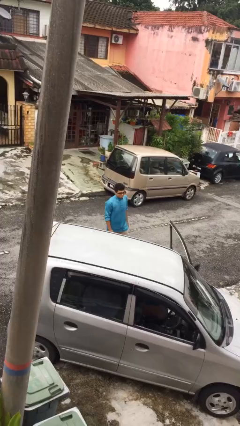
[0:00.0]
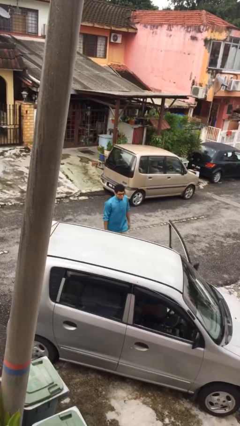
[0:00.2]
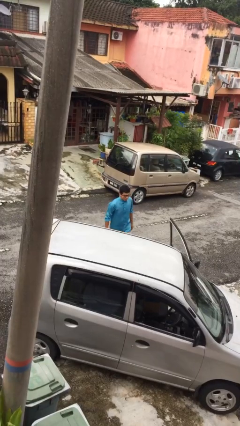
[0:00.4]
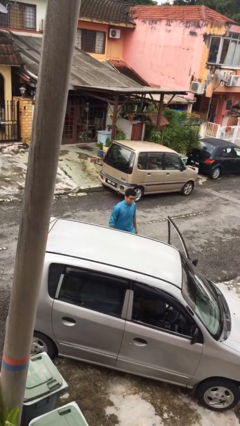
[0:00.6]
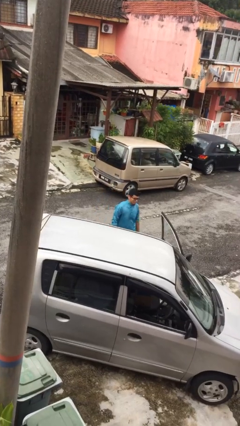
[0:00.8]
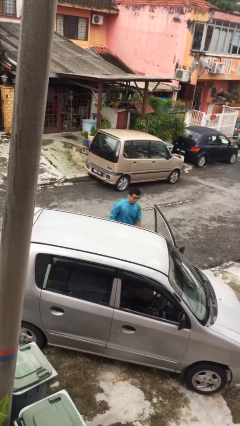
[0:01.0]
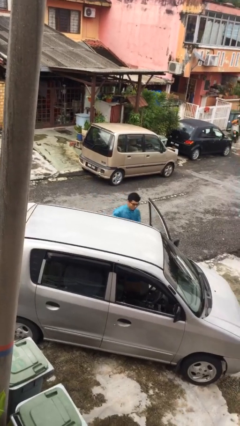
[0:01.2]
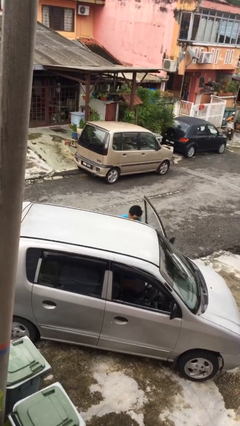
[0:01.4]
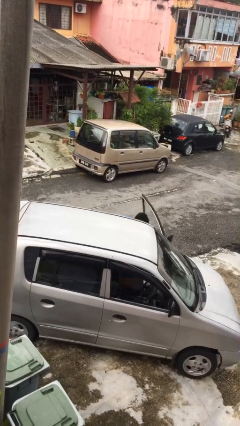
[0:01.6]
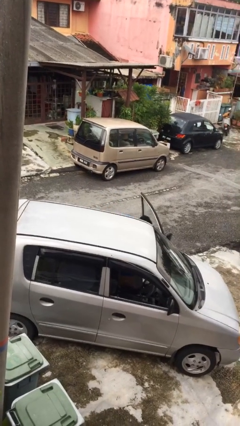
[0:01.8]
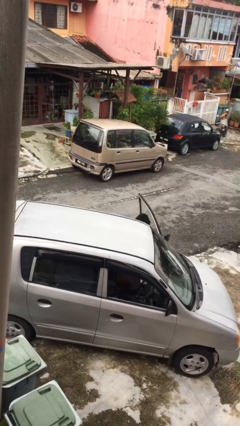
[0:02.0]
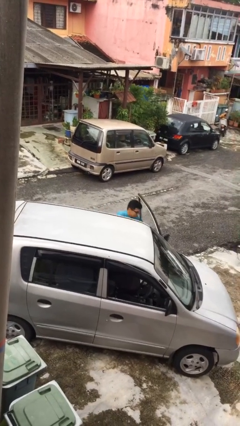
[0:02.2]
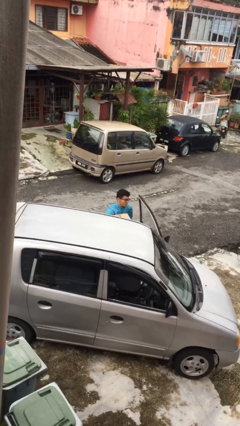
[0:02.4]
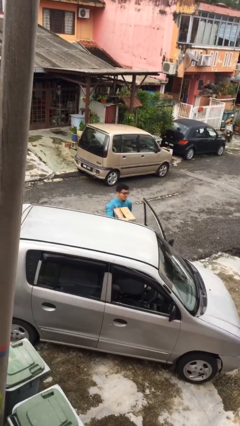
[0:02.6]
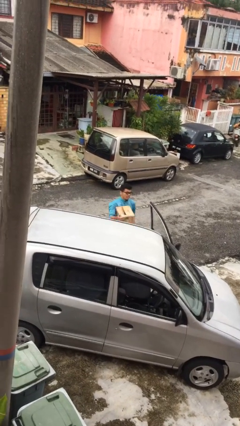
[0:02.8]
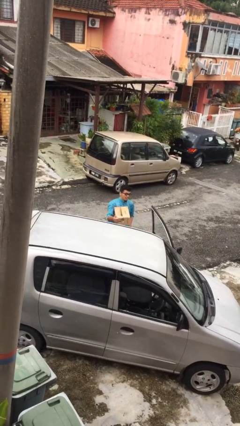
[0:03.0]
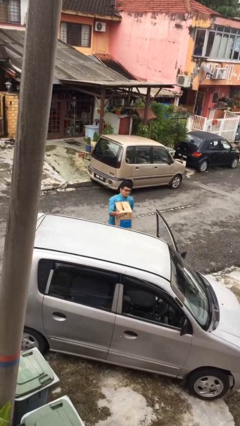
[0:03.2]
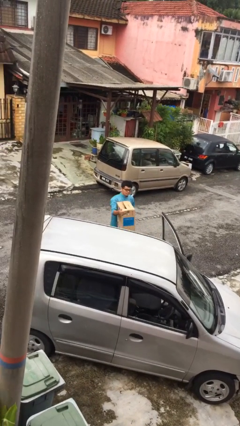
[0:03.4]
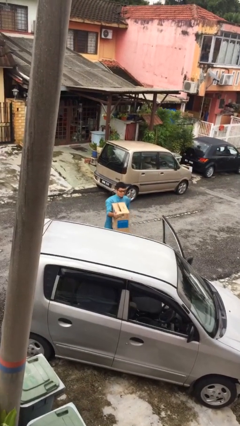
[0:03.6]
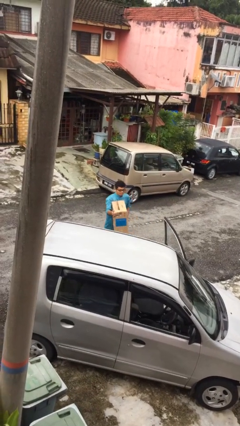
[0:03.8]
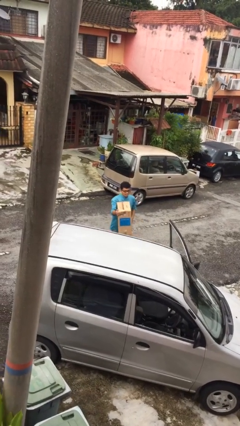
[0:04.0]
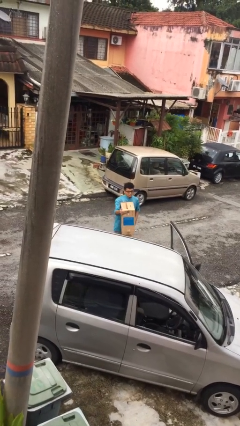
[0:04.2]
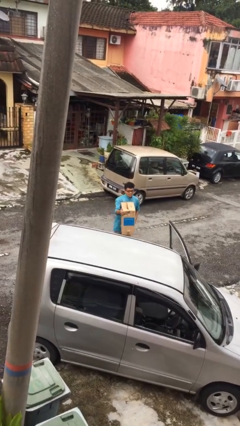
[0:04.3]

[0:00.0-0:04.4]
person unloads car

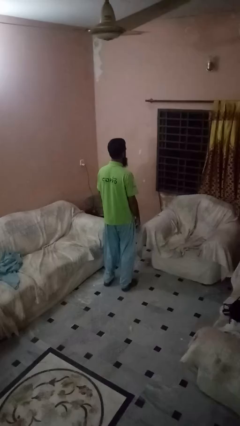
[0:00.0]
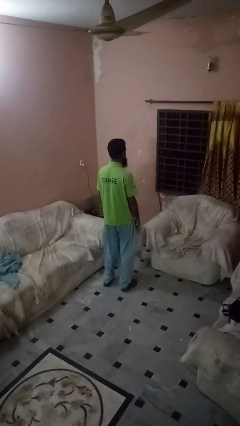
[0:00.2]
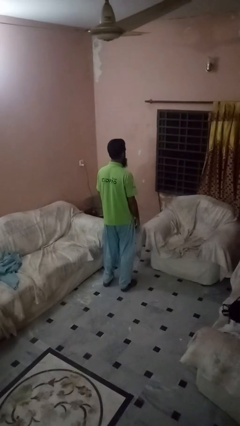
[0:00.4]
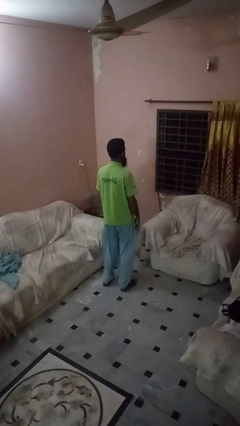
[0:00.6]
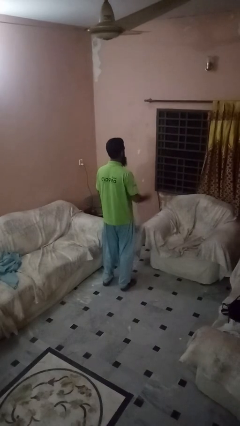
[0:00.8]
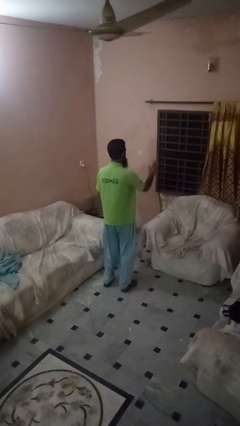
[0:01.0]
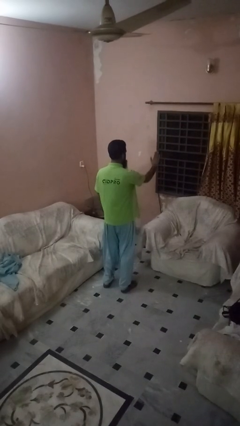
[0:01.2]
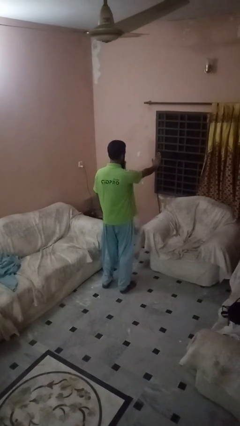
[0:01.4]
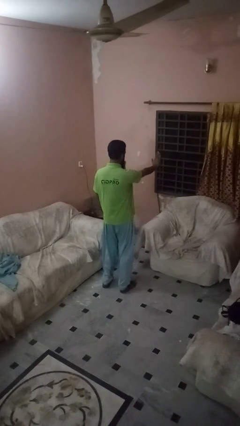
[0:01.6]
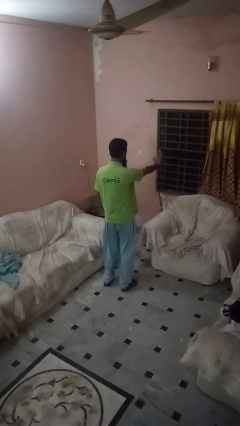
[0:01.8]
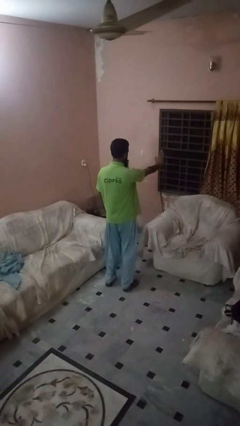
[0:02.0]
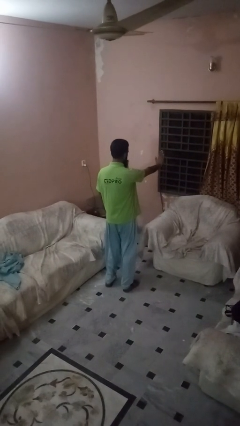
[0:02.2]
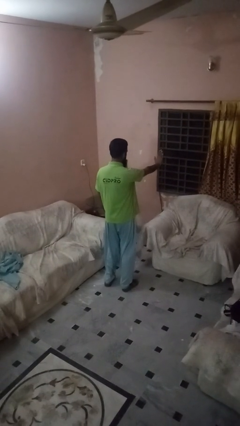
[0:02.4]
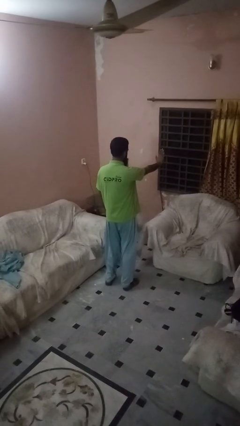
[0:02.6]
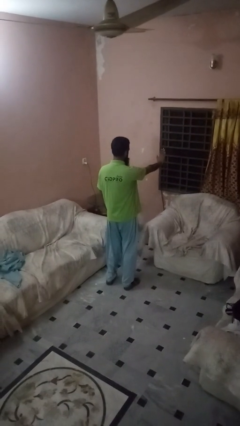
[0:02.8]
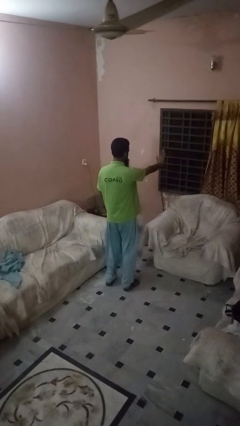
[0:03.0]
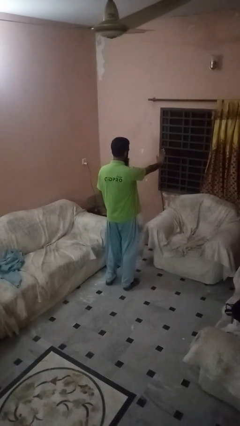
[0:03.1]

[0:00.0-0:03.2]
person gestures stop

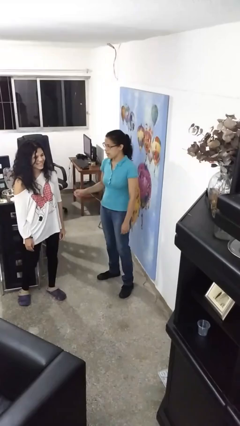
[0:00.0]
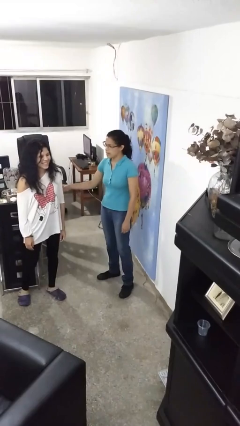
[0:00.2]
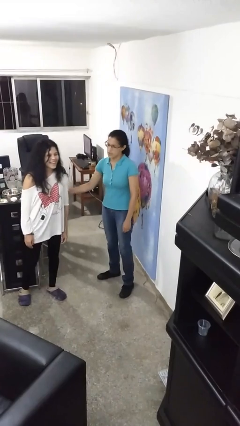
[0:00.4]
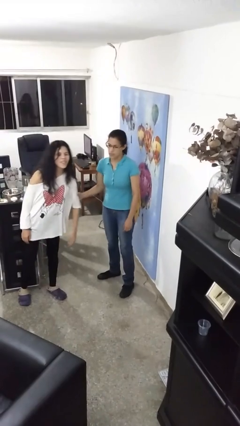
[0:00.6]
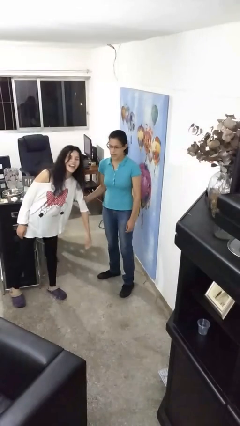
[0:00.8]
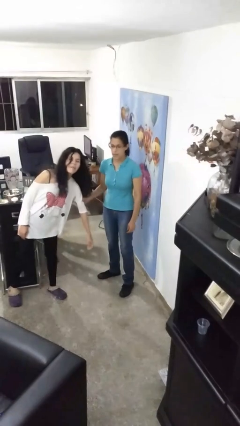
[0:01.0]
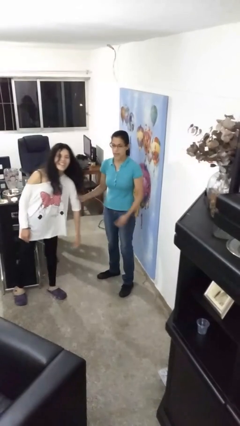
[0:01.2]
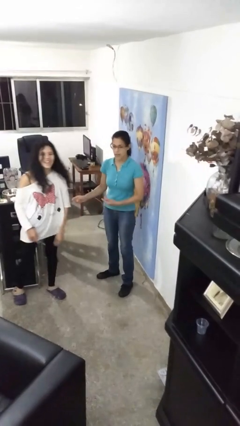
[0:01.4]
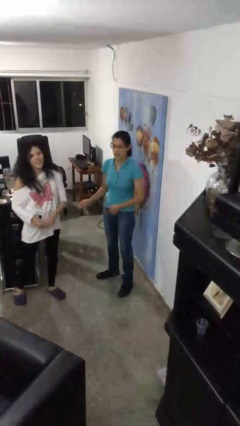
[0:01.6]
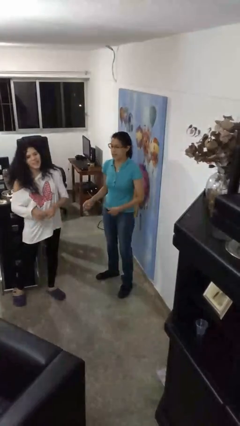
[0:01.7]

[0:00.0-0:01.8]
person grabs person by bicep

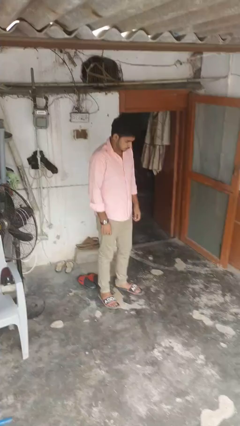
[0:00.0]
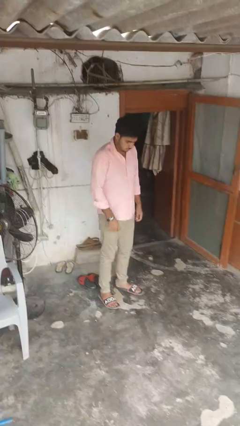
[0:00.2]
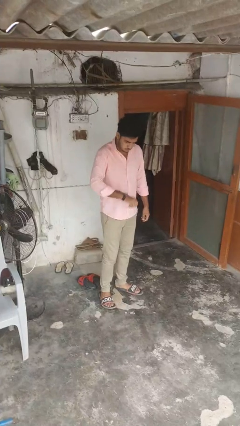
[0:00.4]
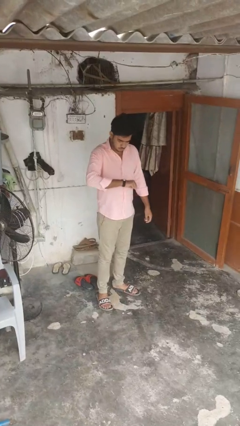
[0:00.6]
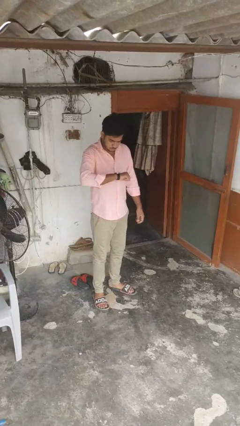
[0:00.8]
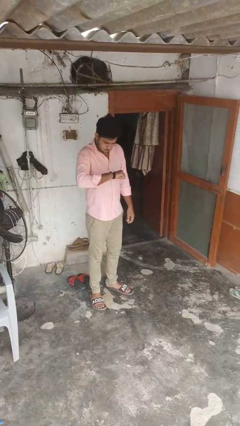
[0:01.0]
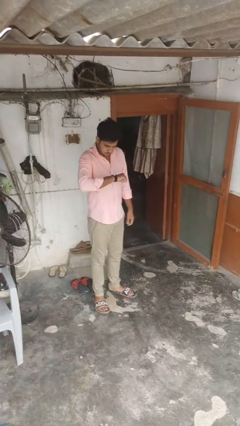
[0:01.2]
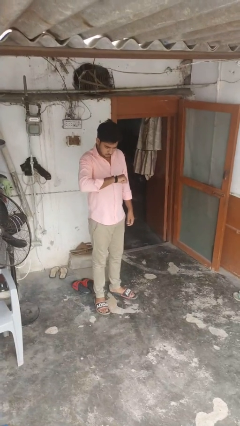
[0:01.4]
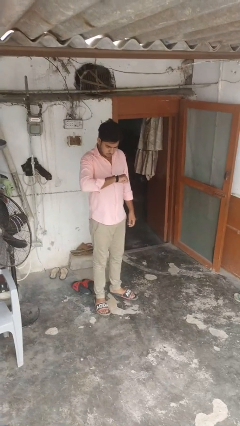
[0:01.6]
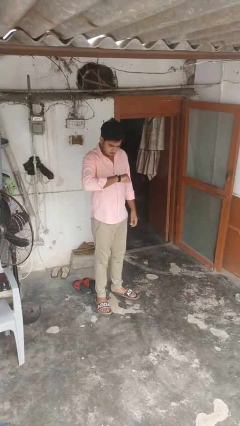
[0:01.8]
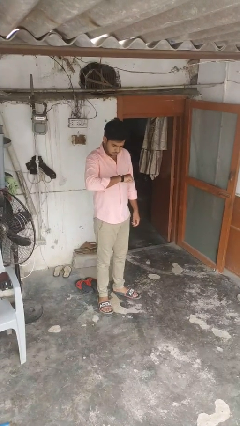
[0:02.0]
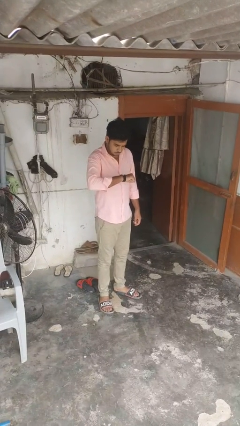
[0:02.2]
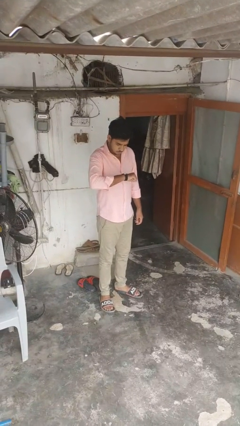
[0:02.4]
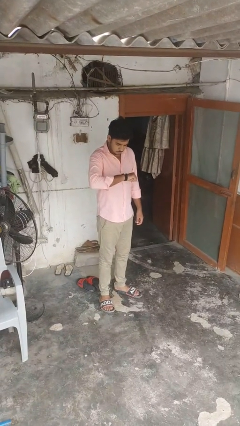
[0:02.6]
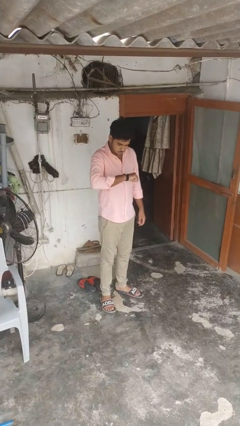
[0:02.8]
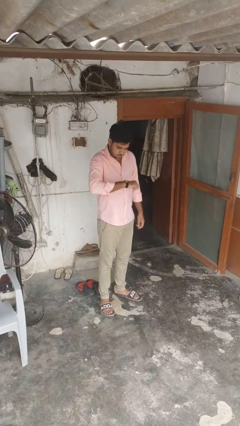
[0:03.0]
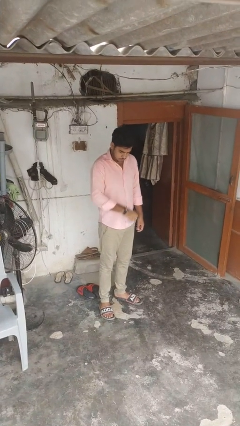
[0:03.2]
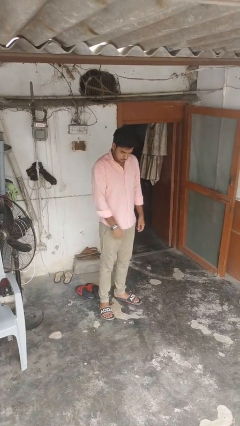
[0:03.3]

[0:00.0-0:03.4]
person looks at wristwatch

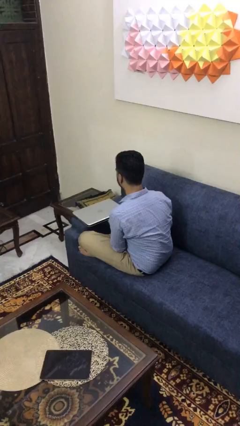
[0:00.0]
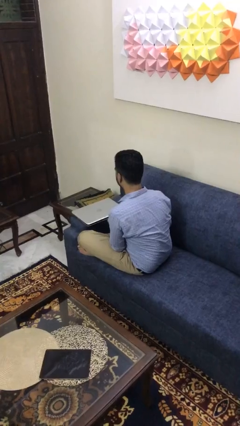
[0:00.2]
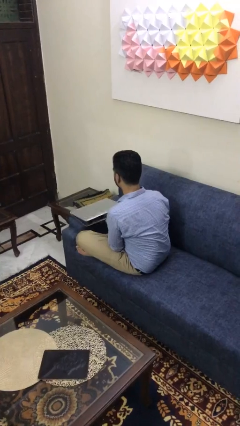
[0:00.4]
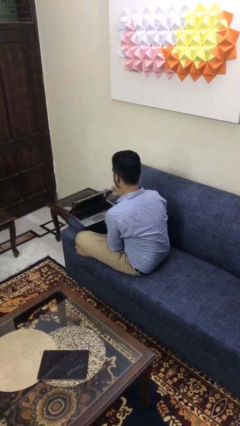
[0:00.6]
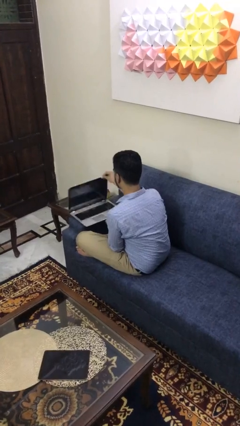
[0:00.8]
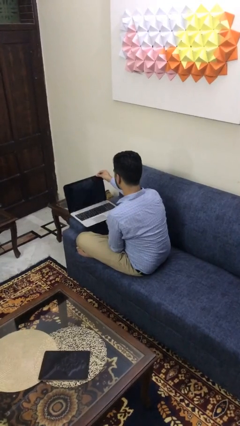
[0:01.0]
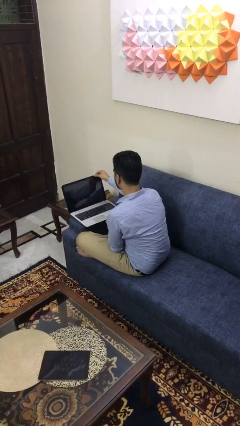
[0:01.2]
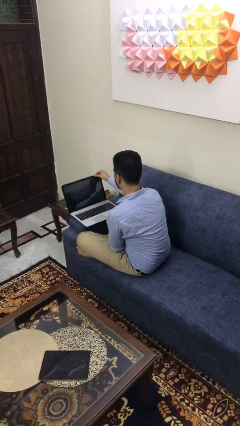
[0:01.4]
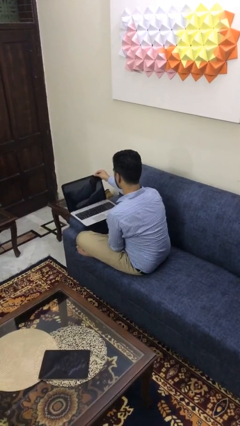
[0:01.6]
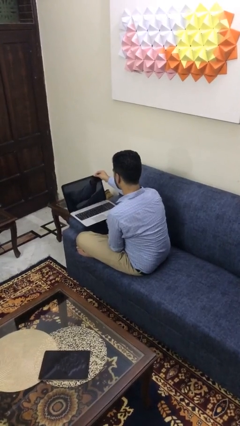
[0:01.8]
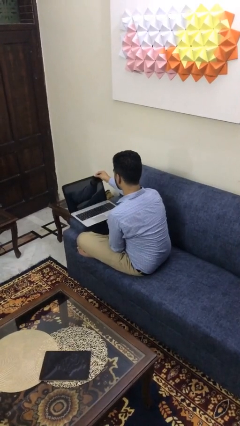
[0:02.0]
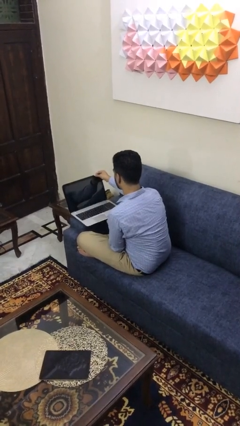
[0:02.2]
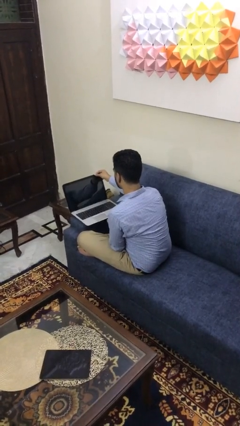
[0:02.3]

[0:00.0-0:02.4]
person opens laptop

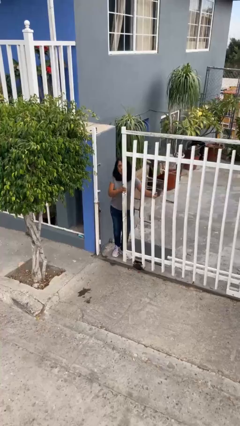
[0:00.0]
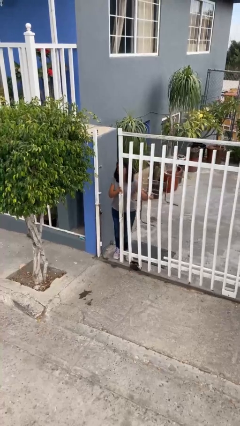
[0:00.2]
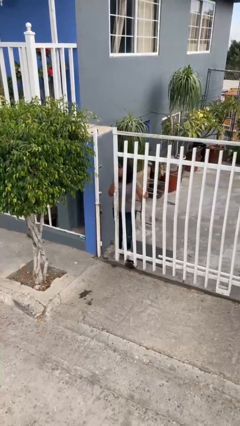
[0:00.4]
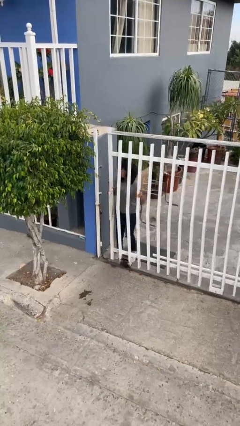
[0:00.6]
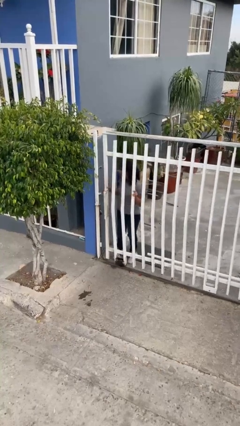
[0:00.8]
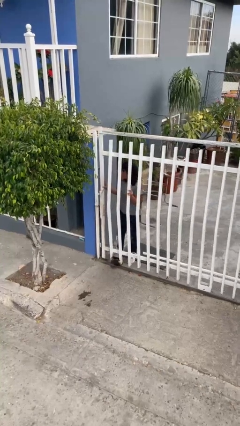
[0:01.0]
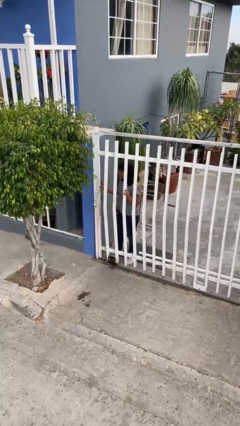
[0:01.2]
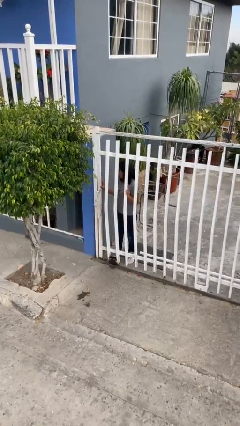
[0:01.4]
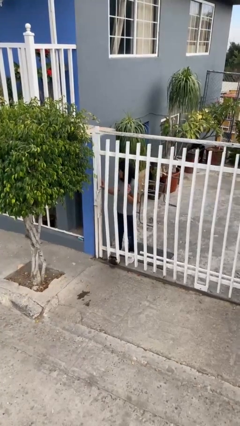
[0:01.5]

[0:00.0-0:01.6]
person closes facility door

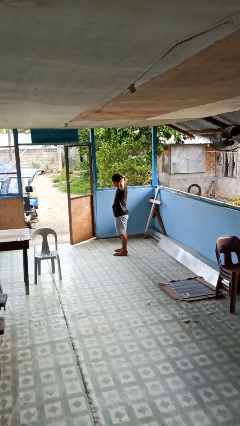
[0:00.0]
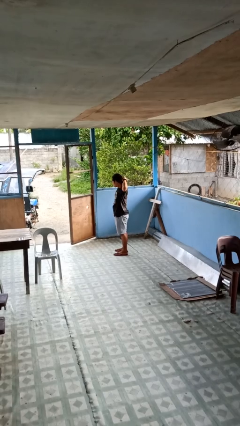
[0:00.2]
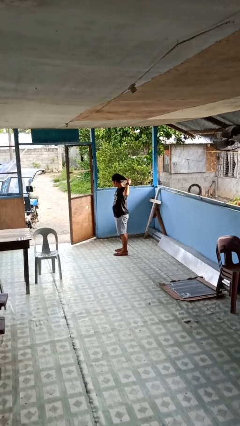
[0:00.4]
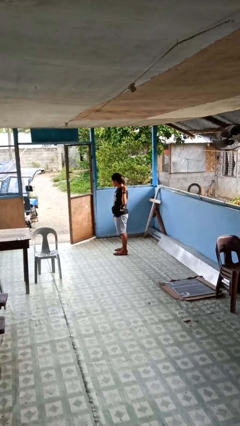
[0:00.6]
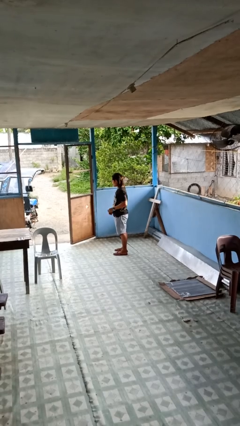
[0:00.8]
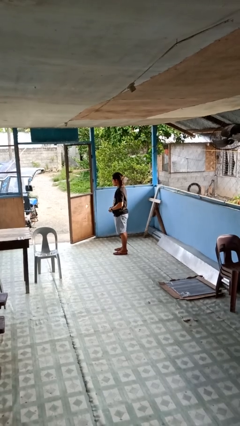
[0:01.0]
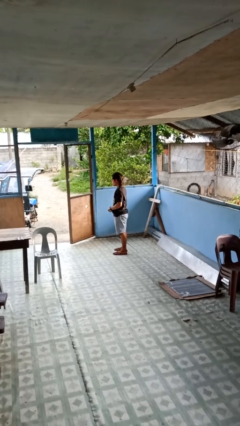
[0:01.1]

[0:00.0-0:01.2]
person takes off hairtie
